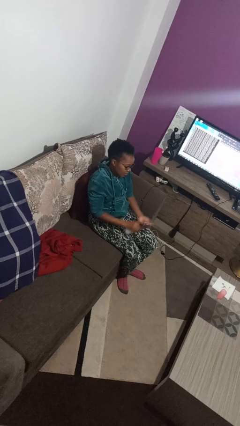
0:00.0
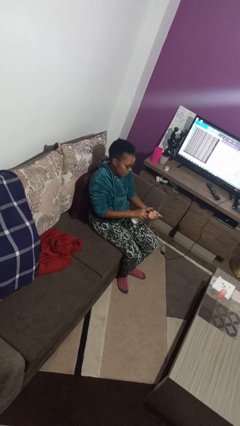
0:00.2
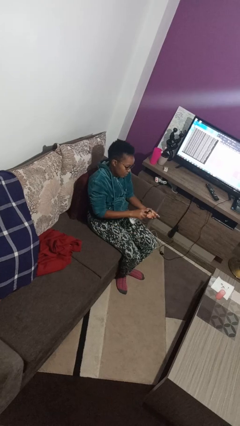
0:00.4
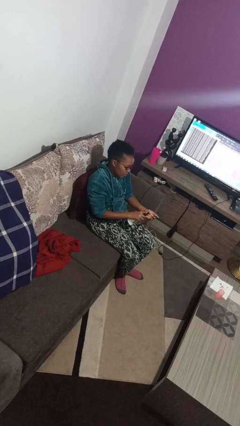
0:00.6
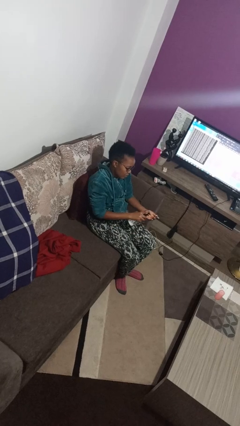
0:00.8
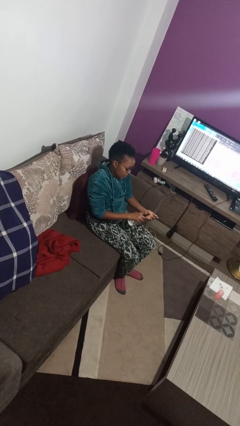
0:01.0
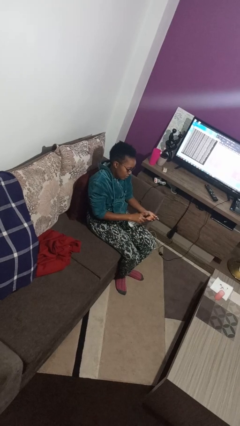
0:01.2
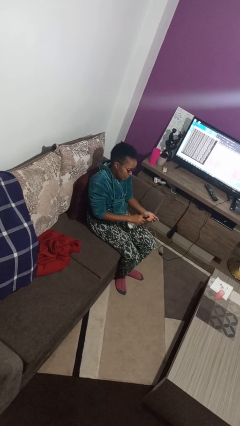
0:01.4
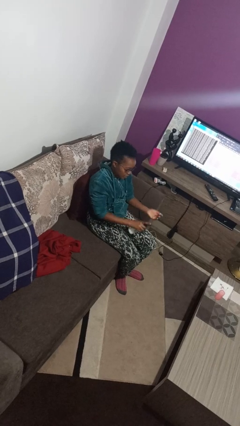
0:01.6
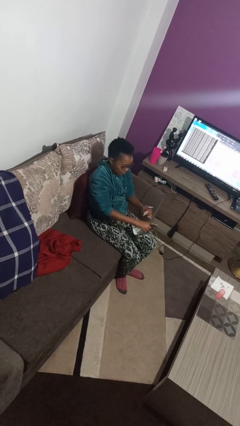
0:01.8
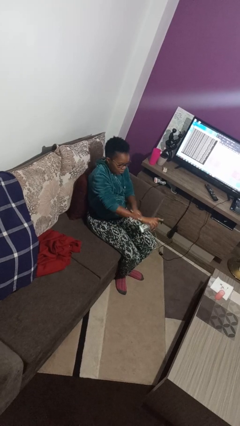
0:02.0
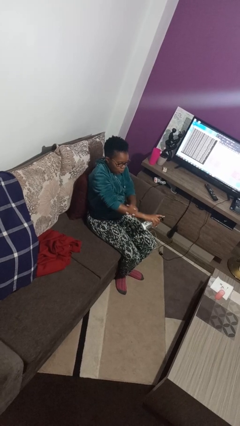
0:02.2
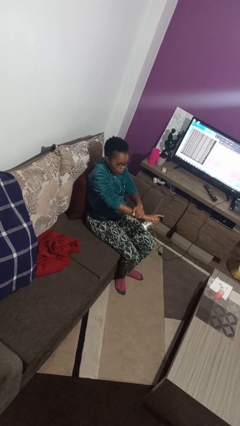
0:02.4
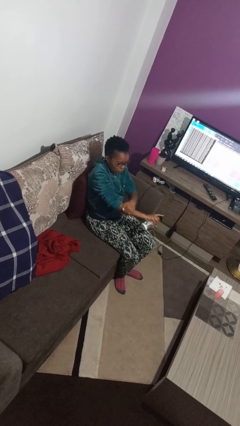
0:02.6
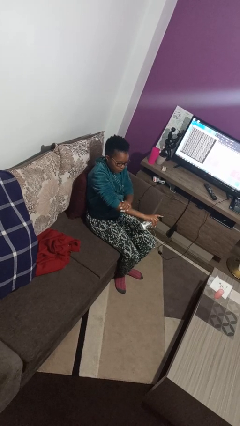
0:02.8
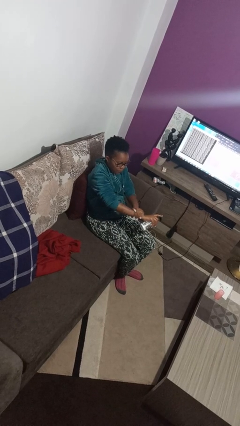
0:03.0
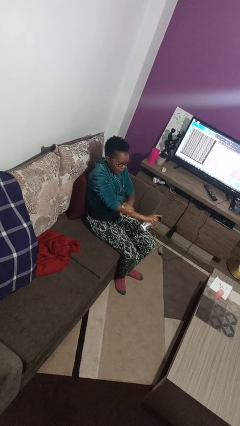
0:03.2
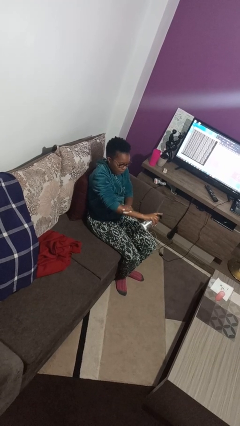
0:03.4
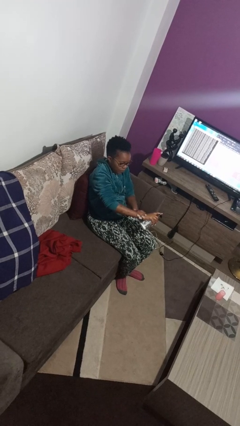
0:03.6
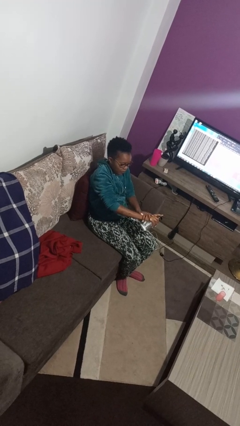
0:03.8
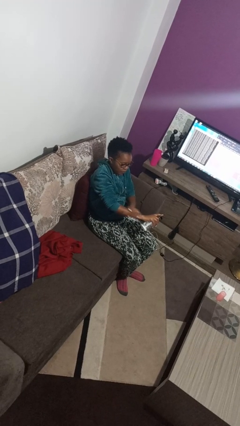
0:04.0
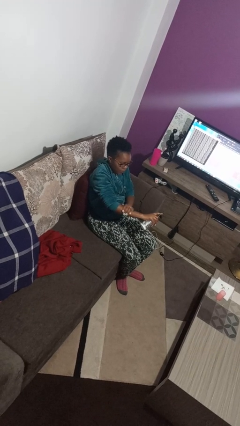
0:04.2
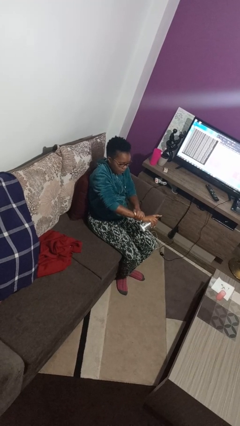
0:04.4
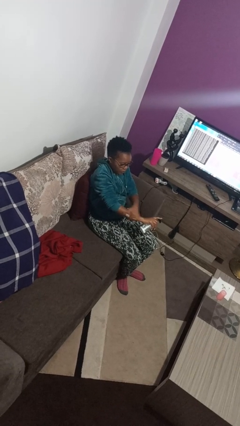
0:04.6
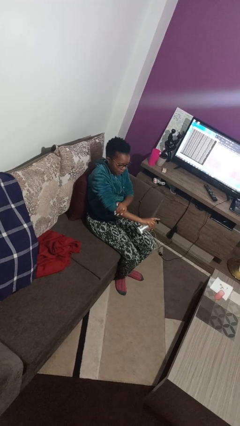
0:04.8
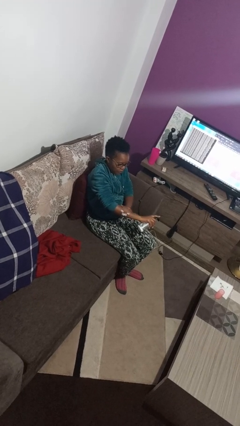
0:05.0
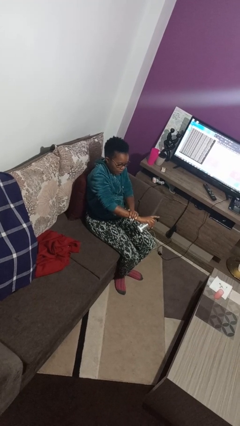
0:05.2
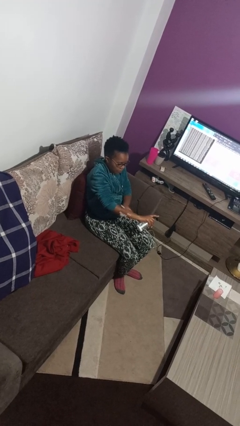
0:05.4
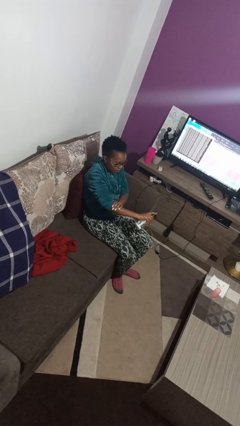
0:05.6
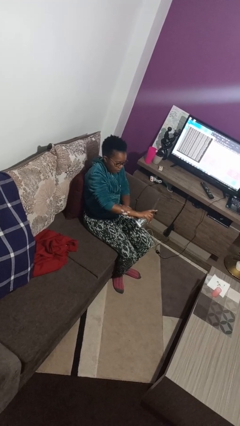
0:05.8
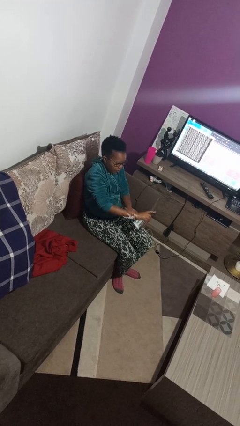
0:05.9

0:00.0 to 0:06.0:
person applies sunscreen

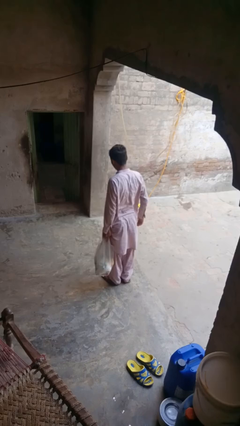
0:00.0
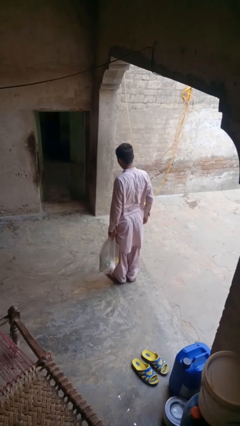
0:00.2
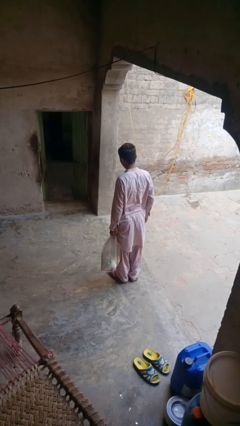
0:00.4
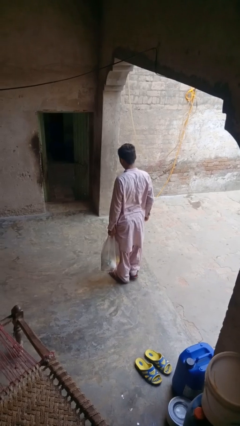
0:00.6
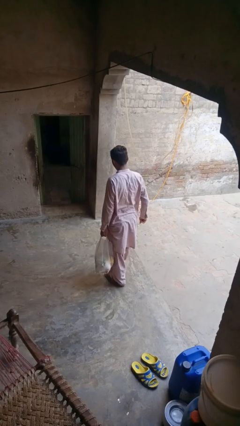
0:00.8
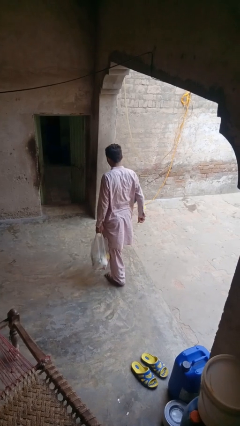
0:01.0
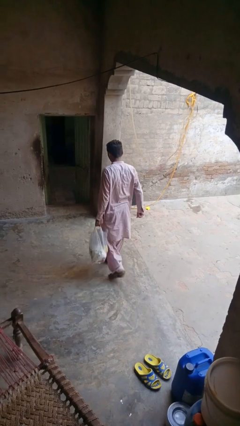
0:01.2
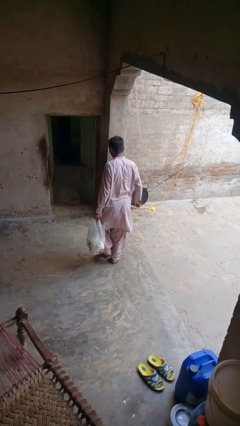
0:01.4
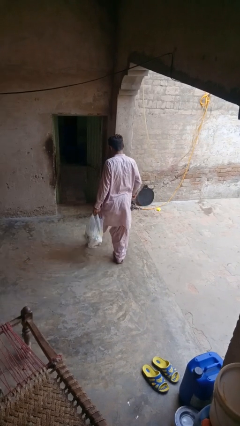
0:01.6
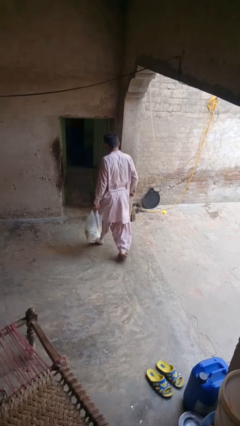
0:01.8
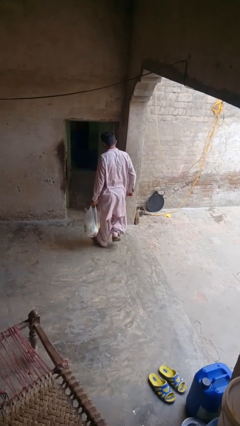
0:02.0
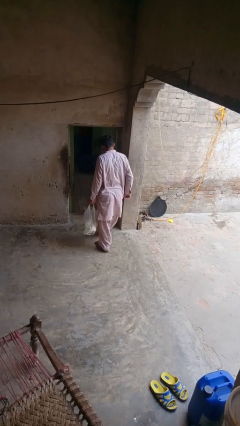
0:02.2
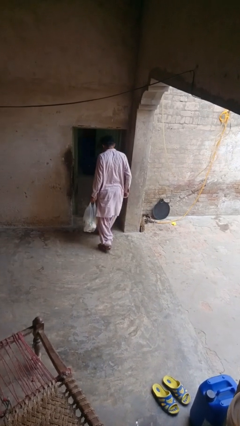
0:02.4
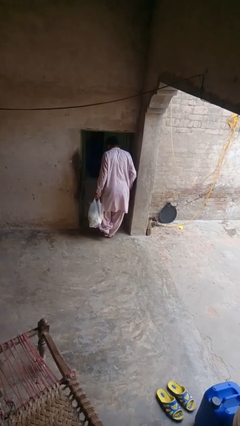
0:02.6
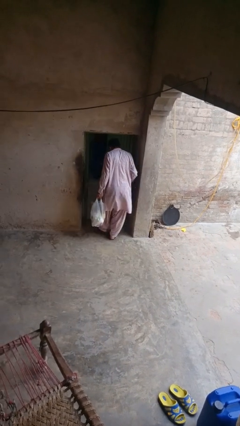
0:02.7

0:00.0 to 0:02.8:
person carries groceries

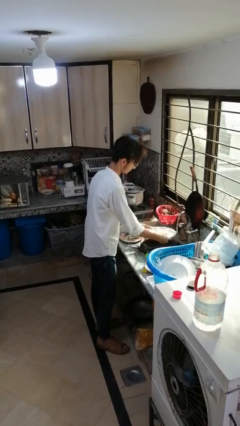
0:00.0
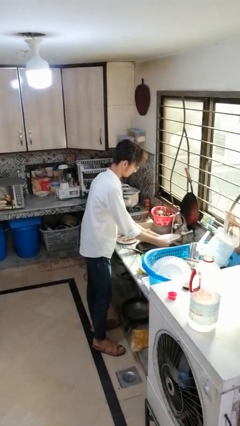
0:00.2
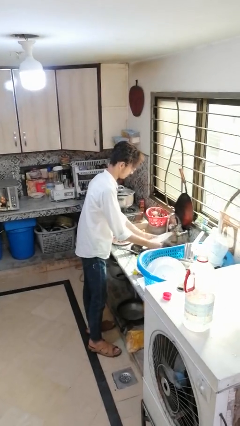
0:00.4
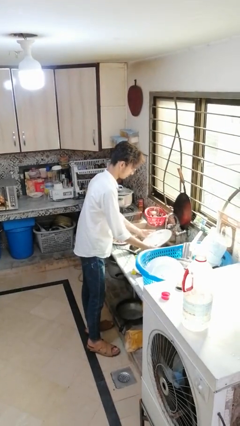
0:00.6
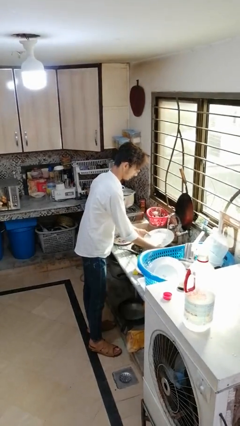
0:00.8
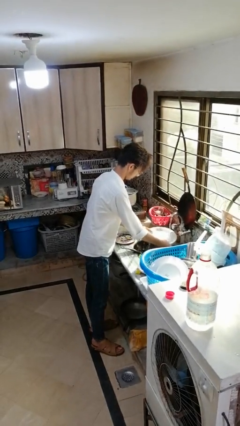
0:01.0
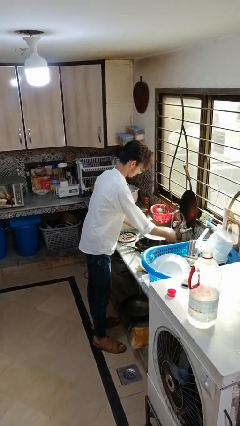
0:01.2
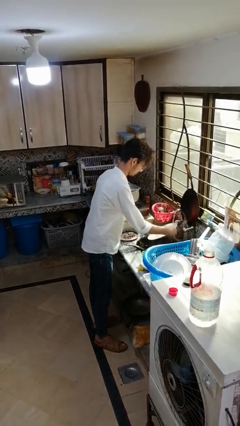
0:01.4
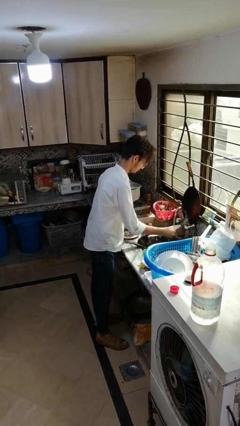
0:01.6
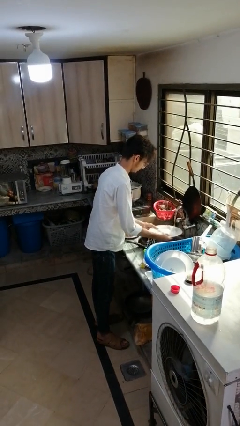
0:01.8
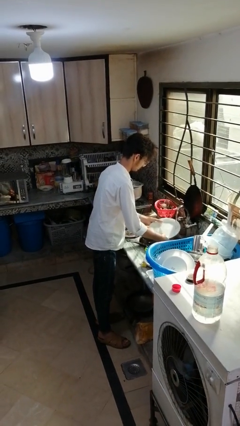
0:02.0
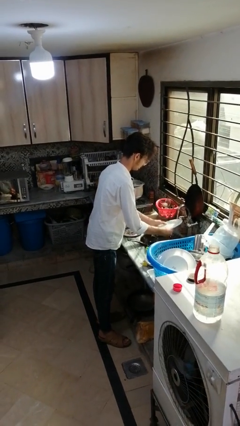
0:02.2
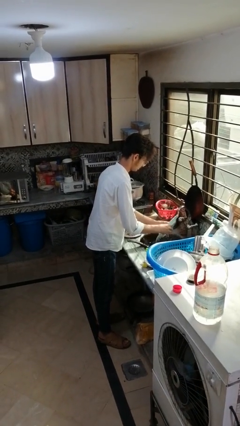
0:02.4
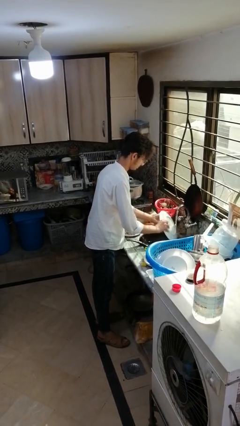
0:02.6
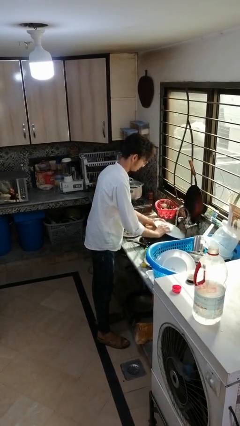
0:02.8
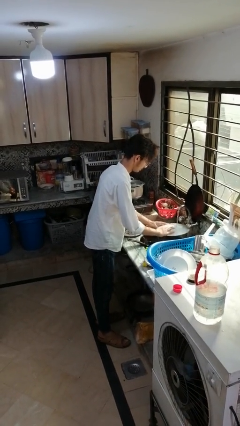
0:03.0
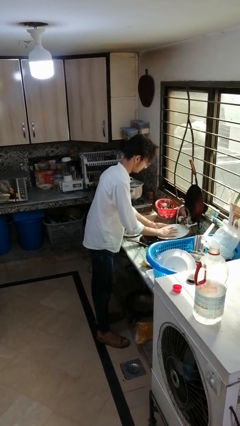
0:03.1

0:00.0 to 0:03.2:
person washes dish

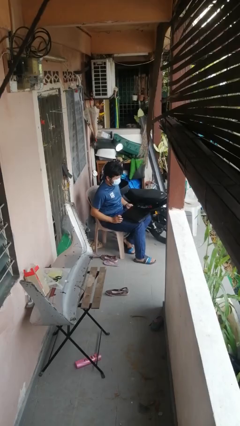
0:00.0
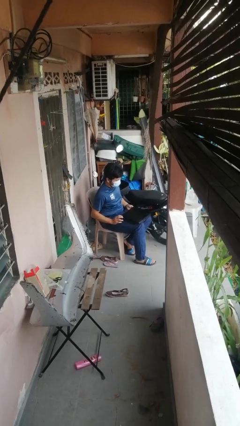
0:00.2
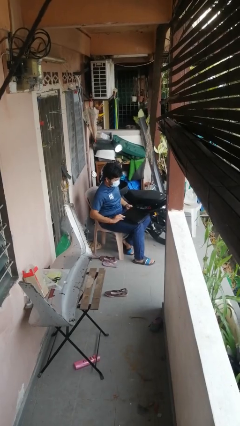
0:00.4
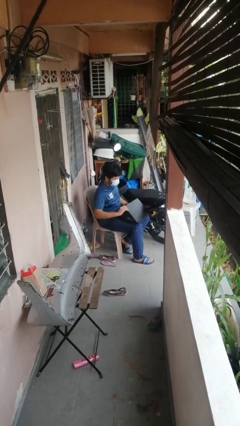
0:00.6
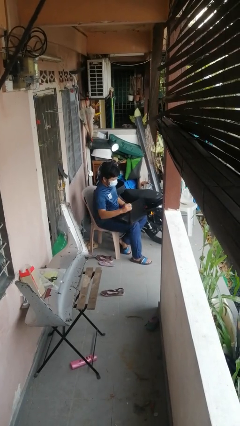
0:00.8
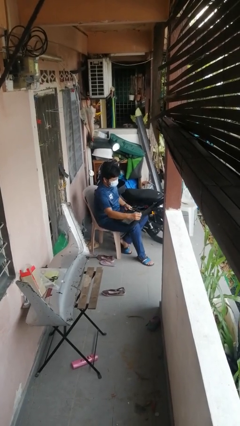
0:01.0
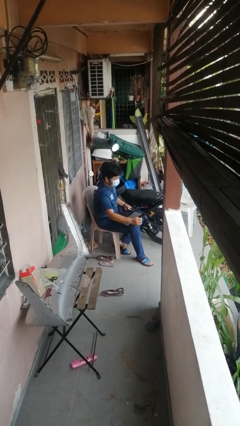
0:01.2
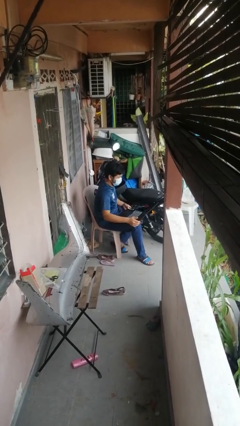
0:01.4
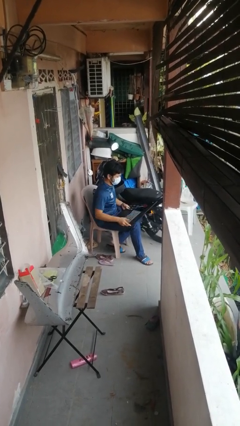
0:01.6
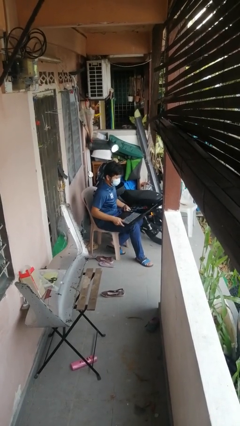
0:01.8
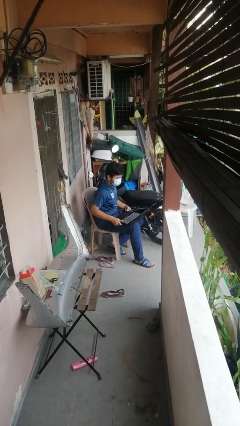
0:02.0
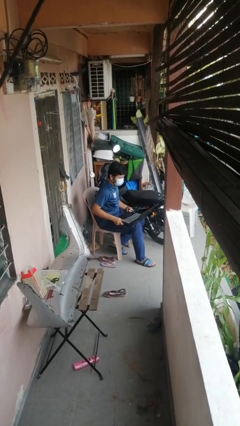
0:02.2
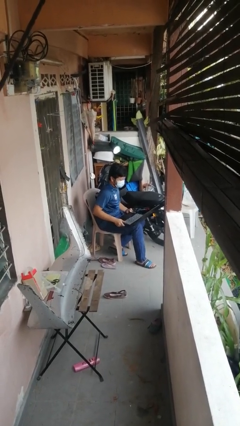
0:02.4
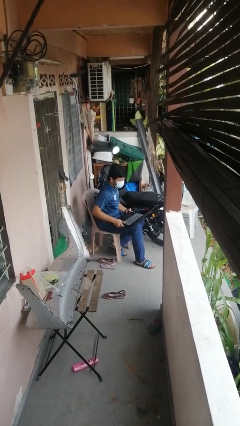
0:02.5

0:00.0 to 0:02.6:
person opens laptop

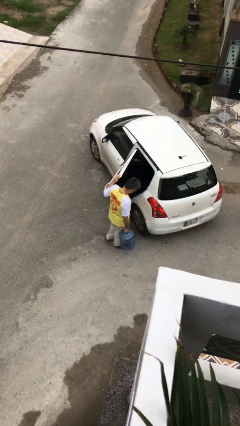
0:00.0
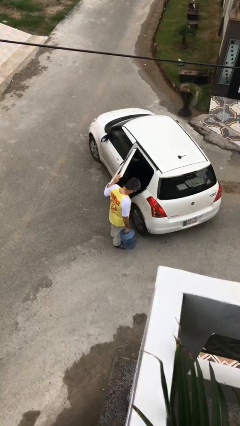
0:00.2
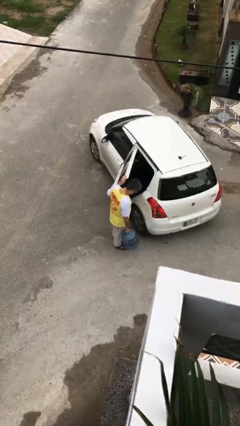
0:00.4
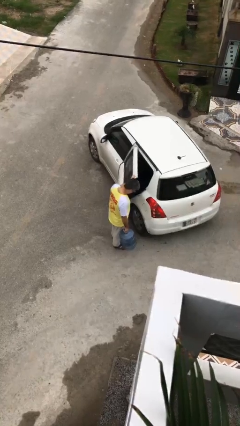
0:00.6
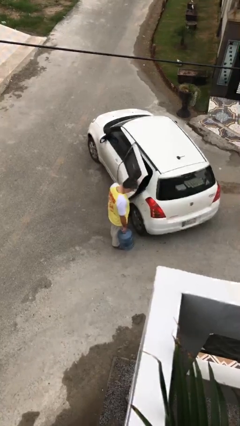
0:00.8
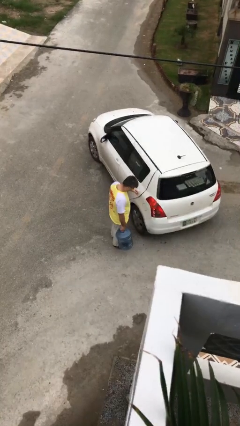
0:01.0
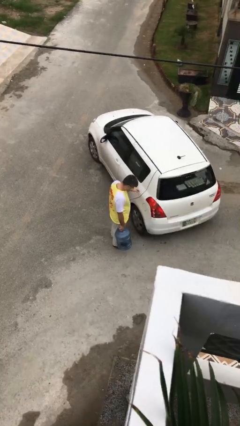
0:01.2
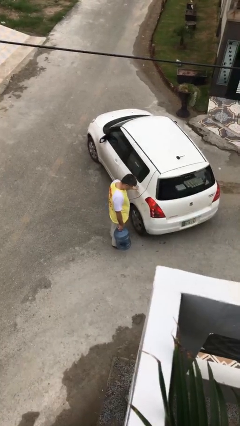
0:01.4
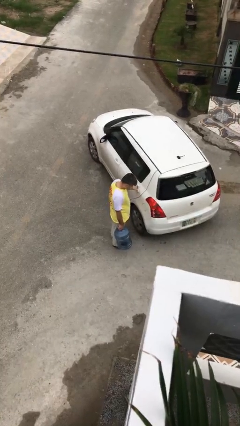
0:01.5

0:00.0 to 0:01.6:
person closes car door

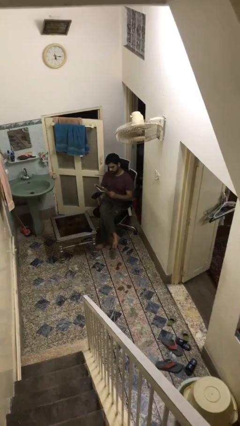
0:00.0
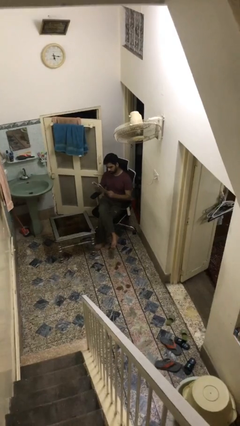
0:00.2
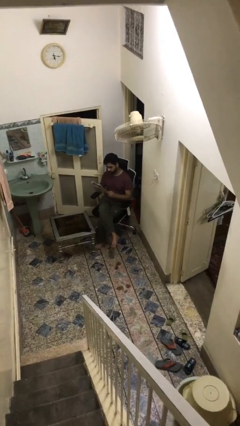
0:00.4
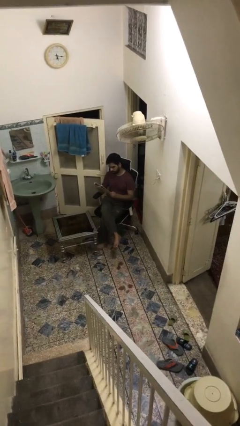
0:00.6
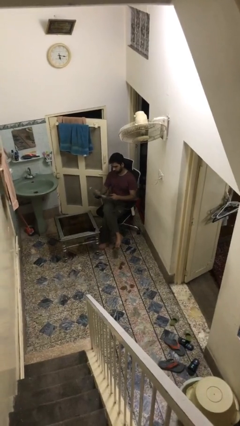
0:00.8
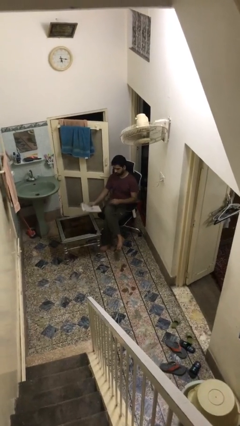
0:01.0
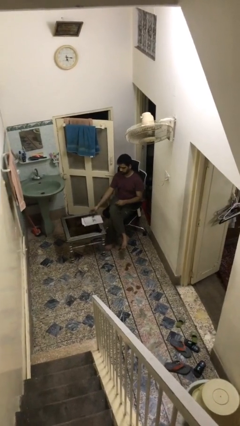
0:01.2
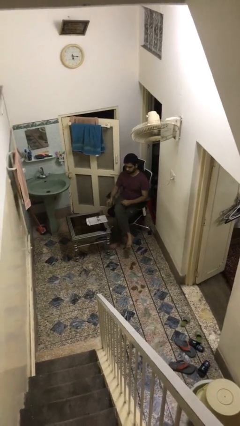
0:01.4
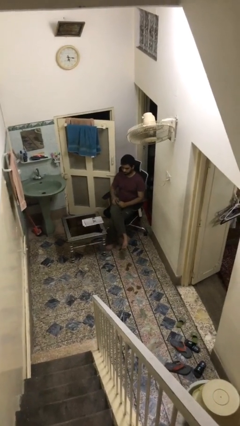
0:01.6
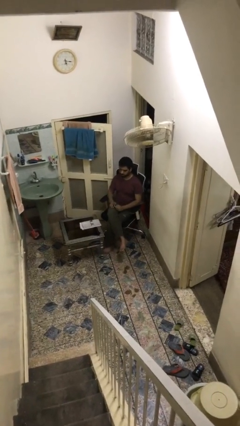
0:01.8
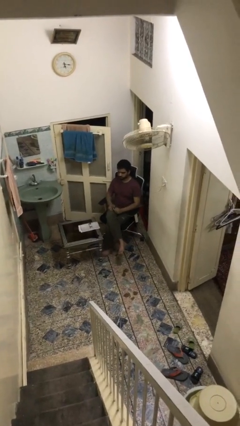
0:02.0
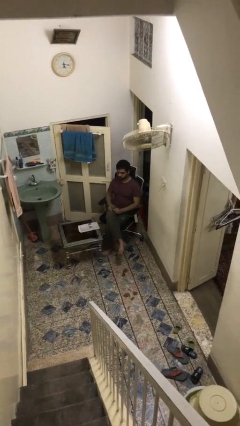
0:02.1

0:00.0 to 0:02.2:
person puts down object on table
